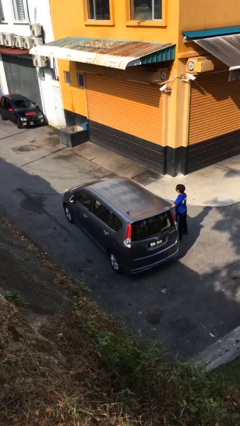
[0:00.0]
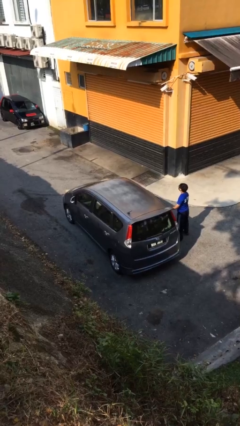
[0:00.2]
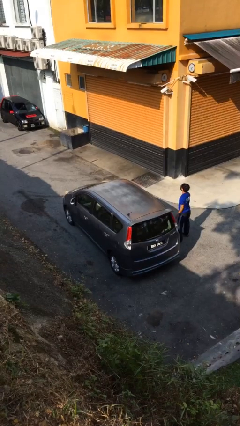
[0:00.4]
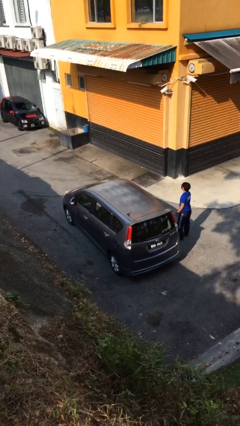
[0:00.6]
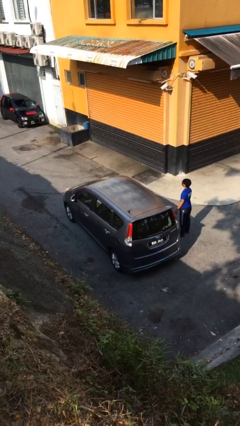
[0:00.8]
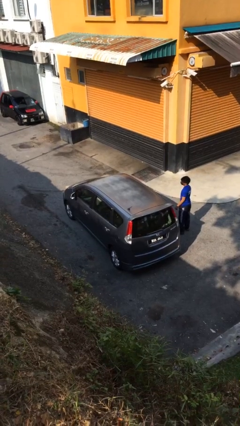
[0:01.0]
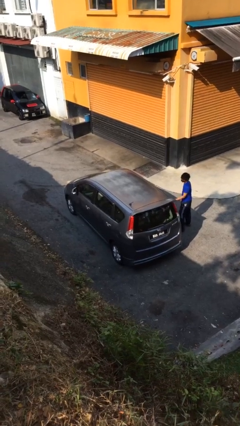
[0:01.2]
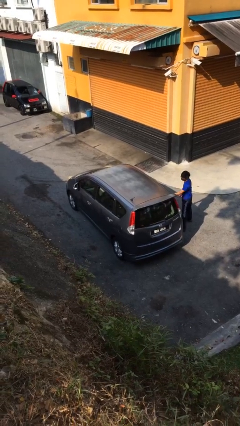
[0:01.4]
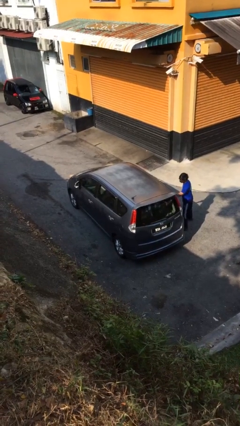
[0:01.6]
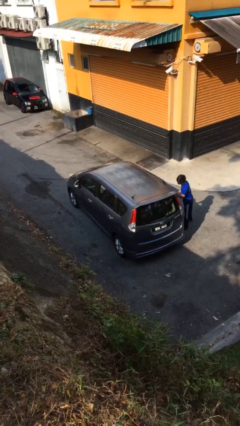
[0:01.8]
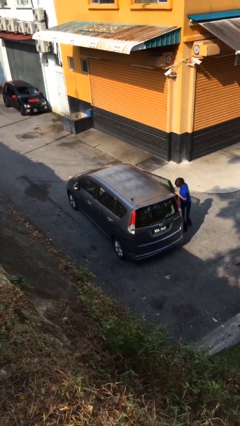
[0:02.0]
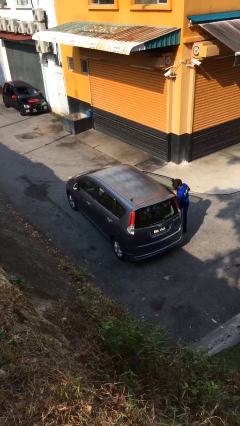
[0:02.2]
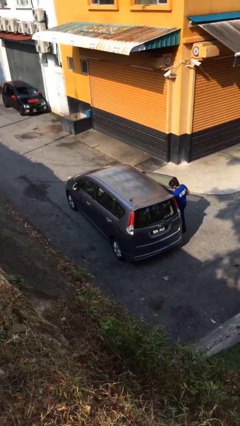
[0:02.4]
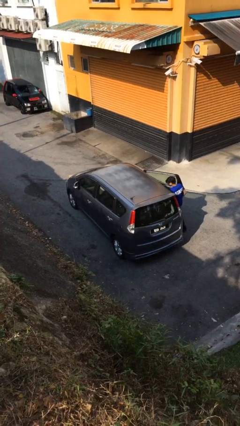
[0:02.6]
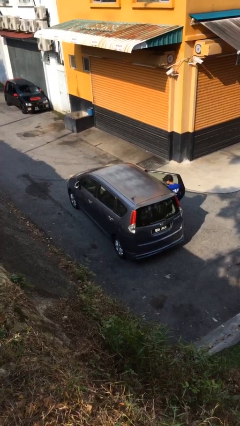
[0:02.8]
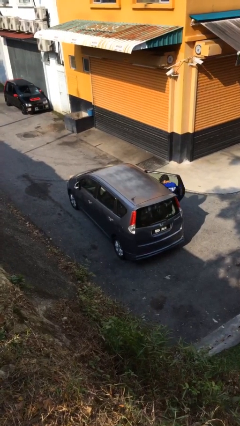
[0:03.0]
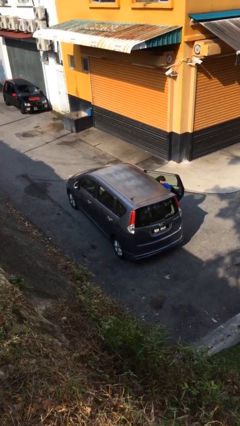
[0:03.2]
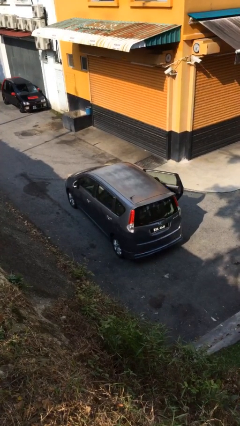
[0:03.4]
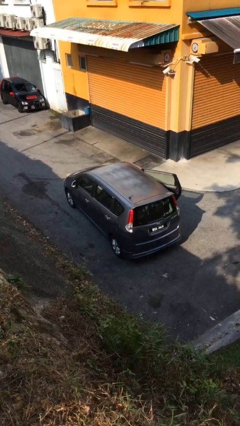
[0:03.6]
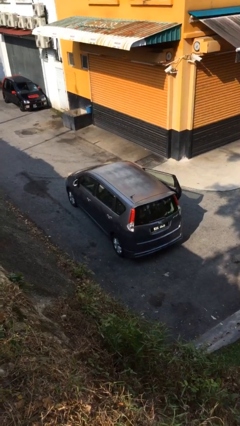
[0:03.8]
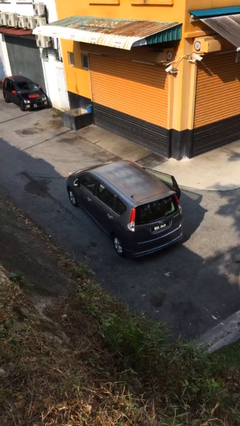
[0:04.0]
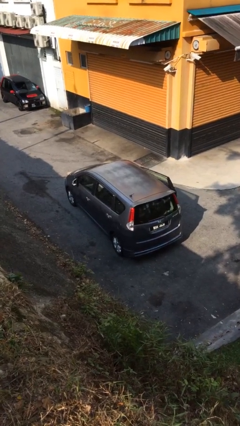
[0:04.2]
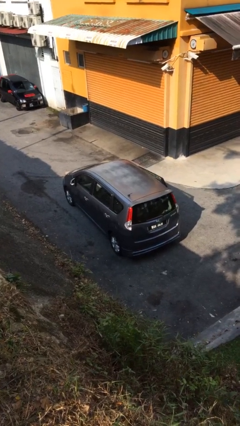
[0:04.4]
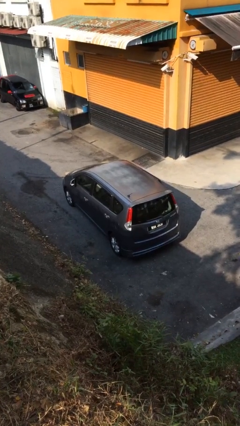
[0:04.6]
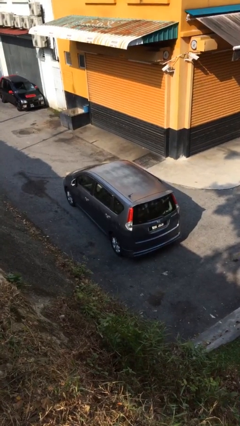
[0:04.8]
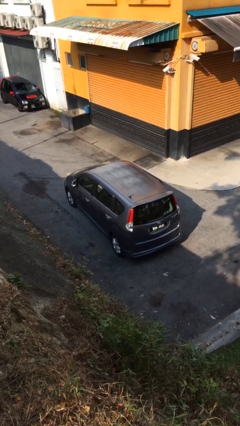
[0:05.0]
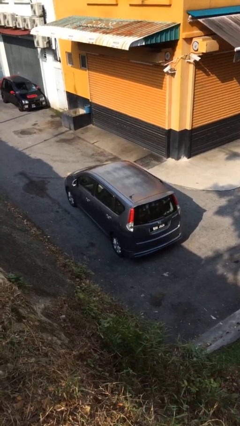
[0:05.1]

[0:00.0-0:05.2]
car picks up person

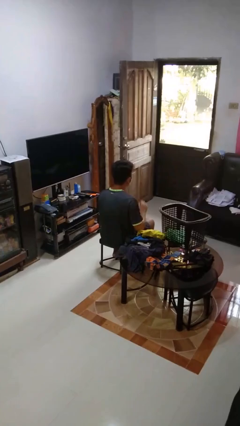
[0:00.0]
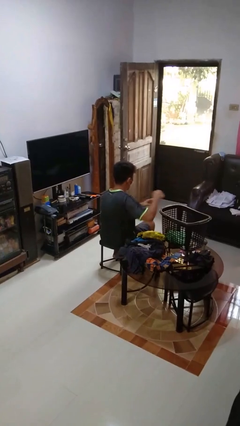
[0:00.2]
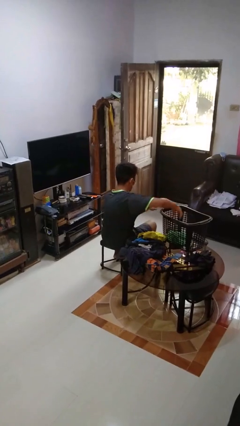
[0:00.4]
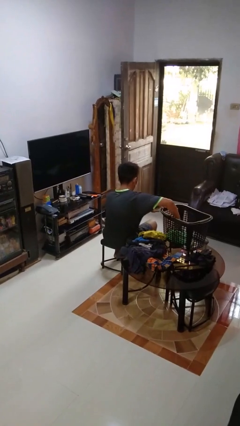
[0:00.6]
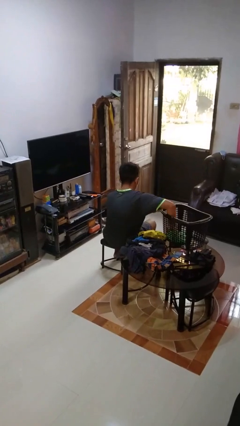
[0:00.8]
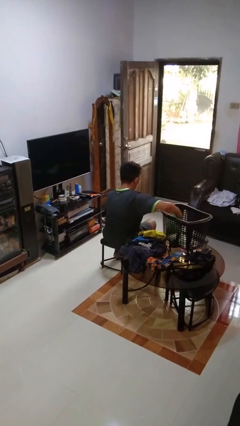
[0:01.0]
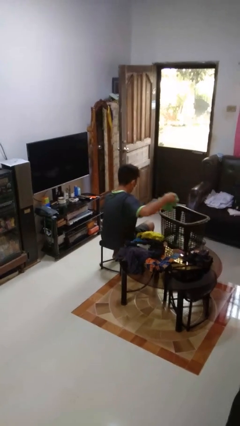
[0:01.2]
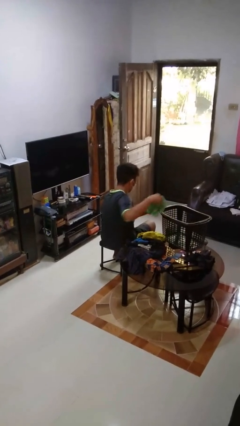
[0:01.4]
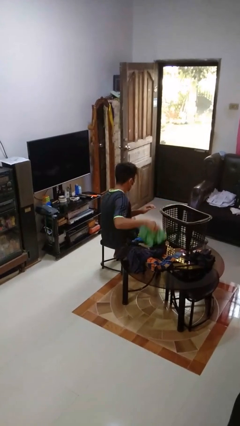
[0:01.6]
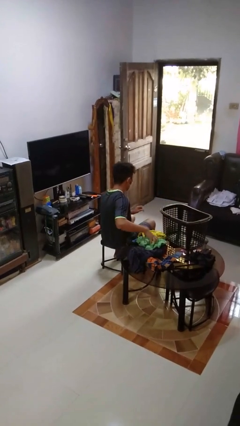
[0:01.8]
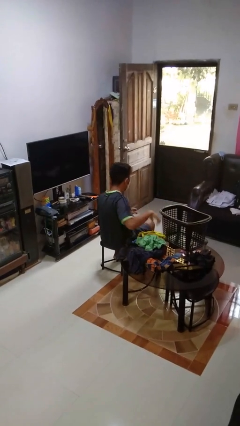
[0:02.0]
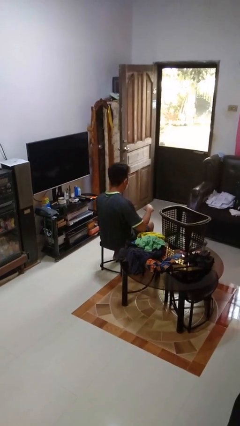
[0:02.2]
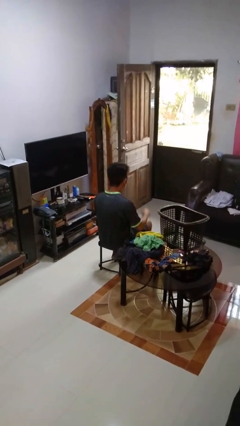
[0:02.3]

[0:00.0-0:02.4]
person takes object from basket

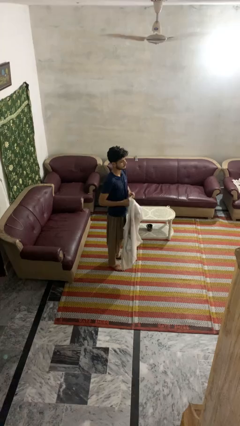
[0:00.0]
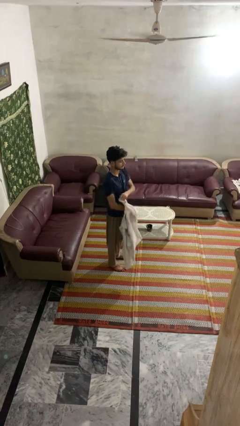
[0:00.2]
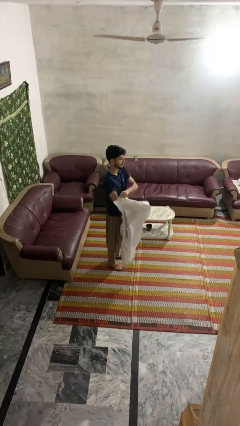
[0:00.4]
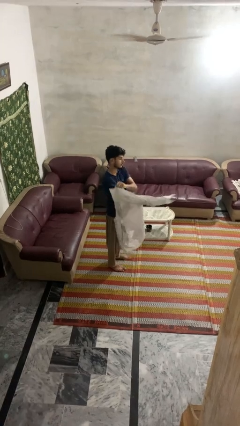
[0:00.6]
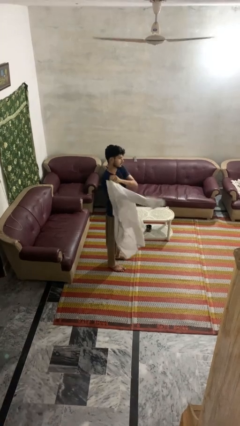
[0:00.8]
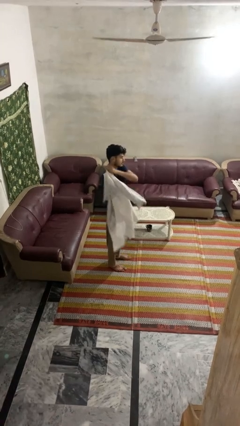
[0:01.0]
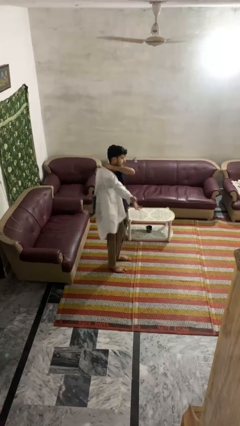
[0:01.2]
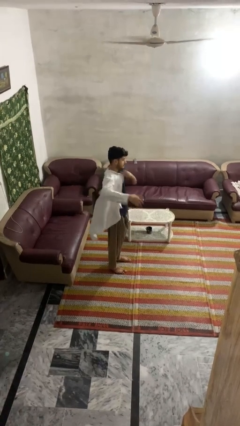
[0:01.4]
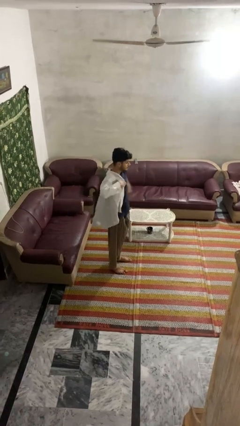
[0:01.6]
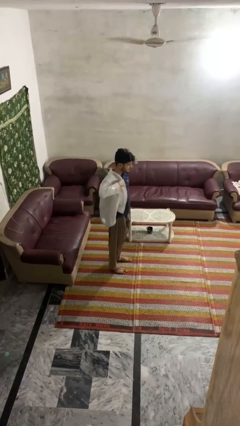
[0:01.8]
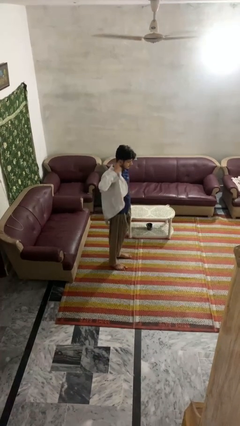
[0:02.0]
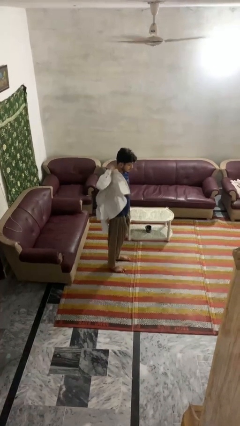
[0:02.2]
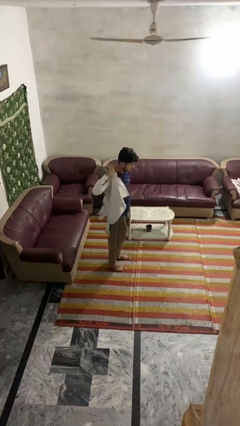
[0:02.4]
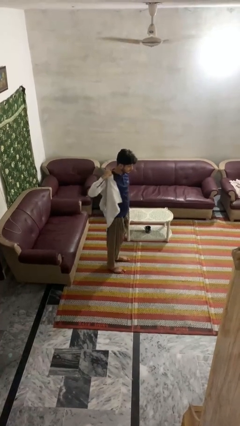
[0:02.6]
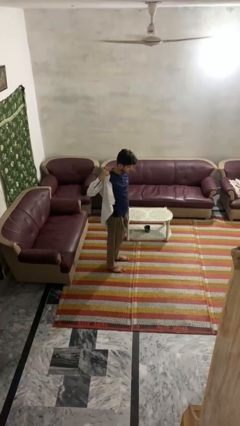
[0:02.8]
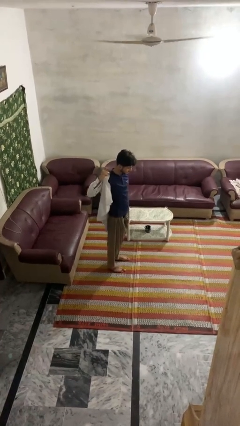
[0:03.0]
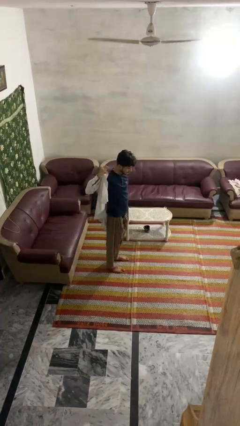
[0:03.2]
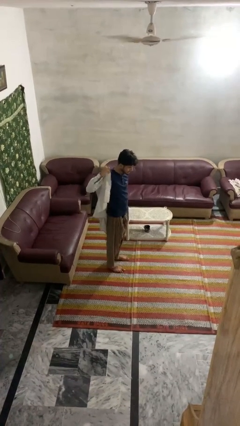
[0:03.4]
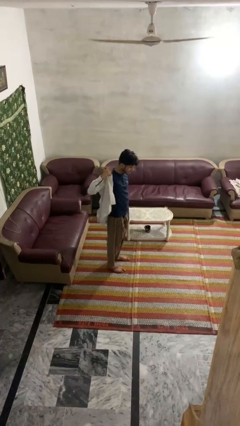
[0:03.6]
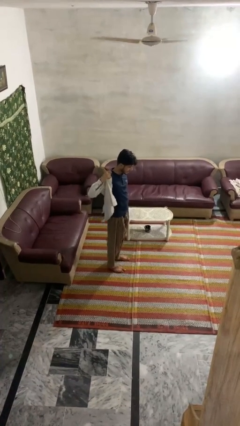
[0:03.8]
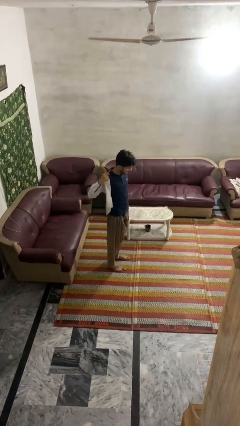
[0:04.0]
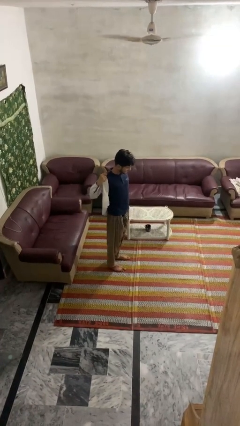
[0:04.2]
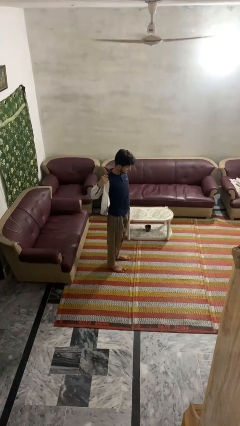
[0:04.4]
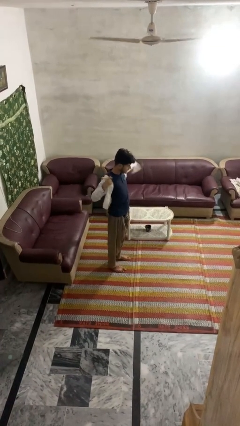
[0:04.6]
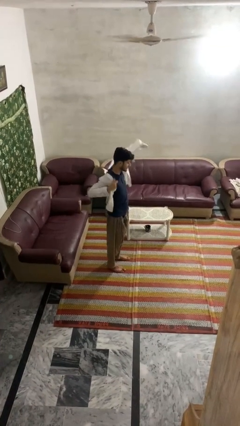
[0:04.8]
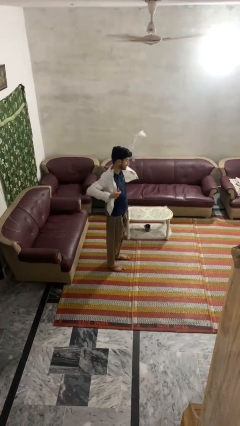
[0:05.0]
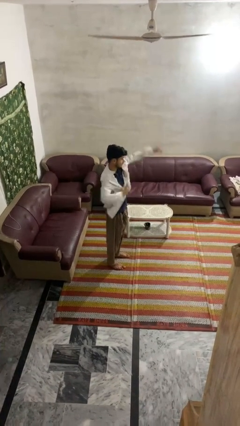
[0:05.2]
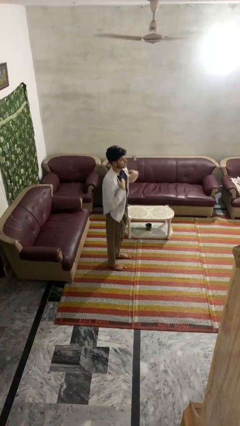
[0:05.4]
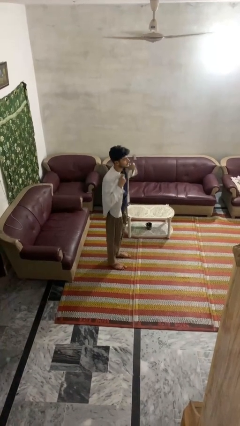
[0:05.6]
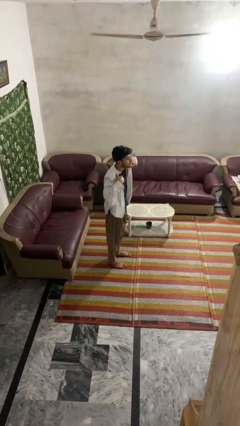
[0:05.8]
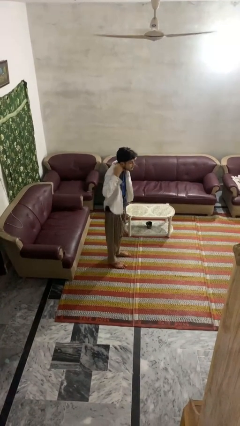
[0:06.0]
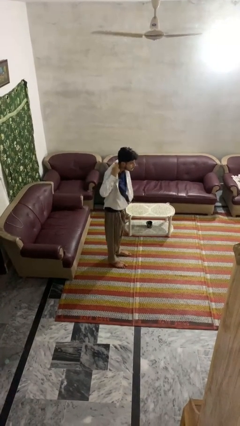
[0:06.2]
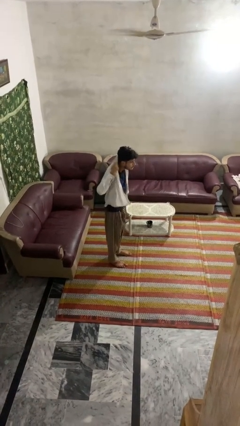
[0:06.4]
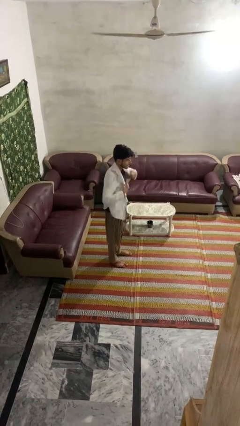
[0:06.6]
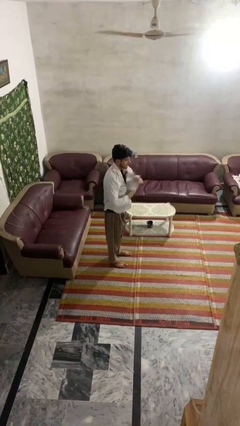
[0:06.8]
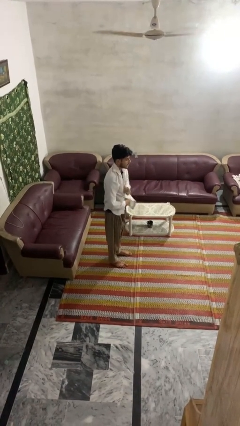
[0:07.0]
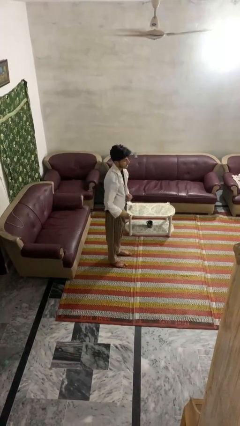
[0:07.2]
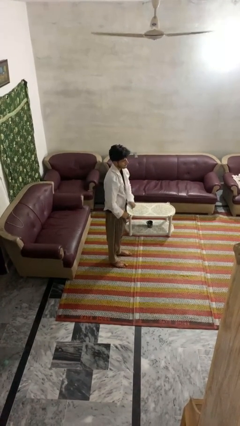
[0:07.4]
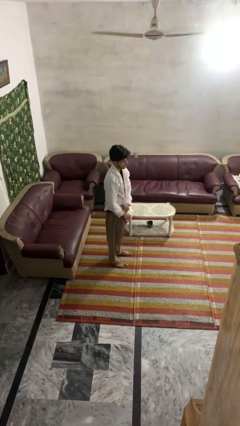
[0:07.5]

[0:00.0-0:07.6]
person puts on shirt

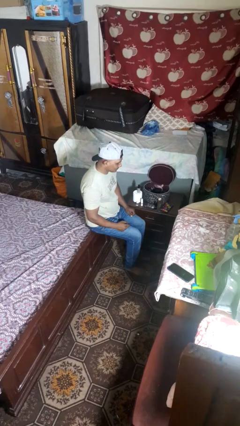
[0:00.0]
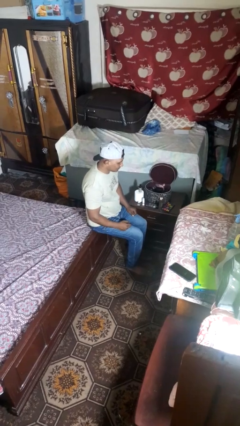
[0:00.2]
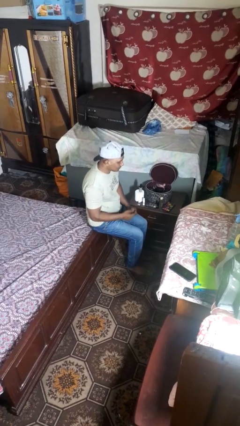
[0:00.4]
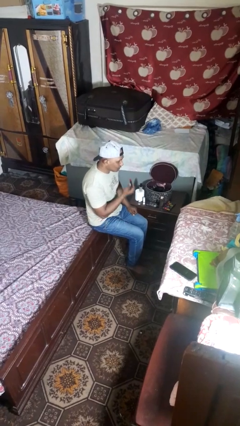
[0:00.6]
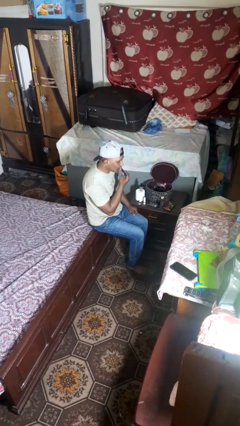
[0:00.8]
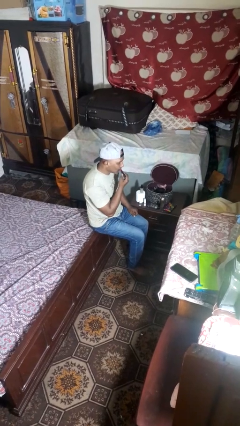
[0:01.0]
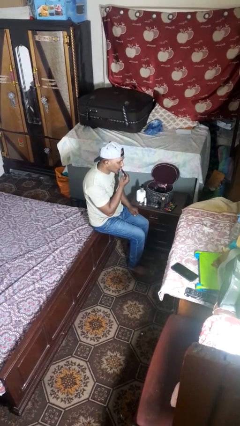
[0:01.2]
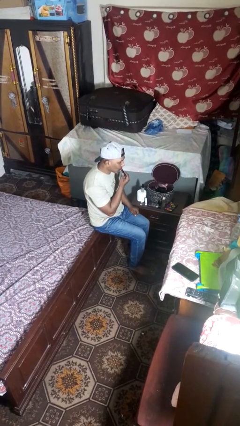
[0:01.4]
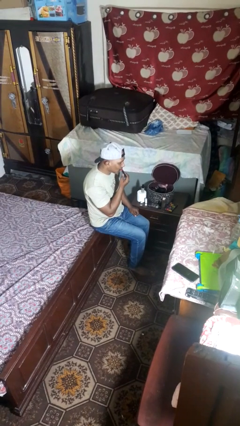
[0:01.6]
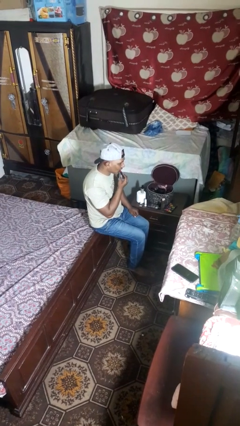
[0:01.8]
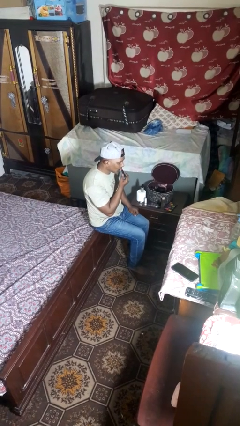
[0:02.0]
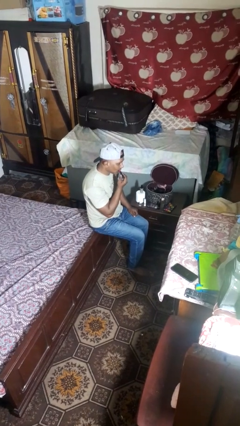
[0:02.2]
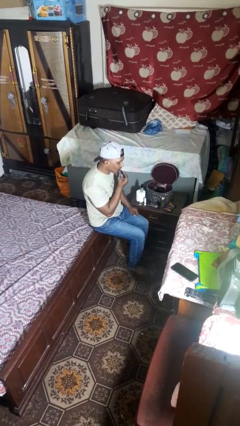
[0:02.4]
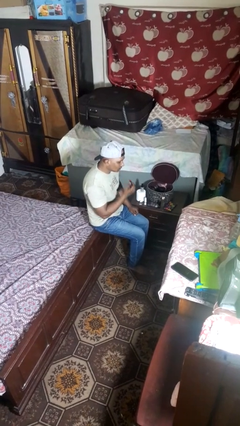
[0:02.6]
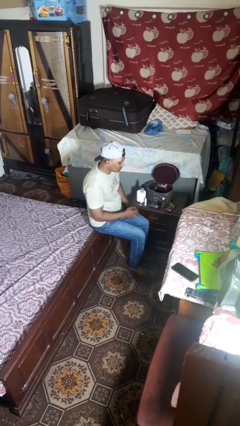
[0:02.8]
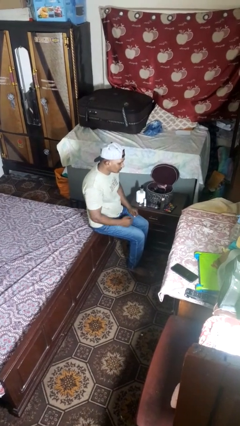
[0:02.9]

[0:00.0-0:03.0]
person applies lip makeup
